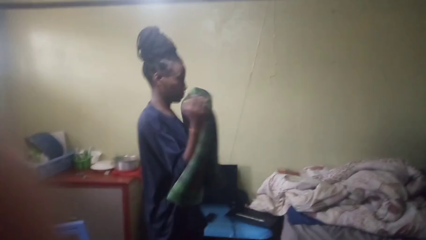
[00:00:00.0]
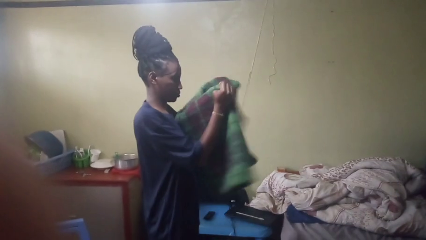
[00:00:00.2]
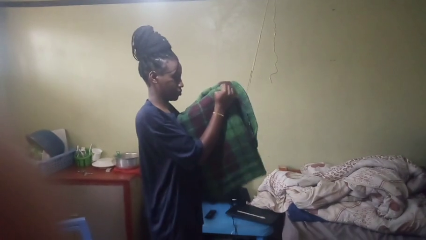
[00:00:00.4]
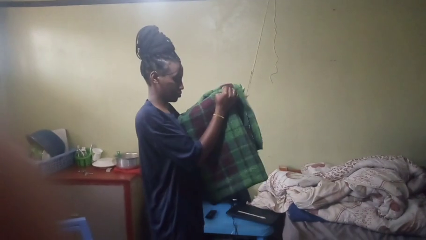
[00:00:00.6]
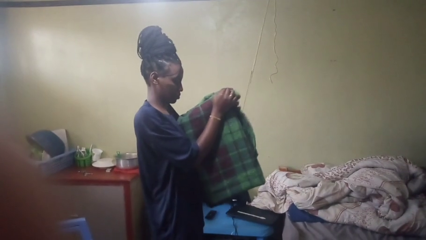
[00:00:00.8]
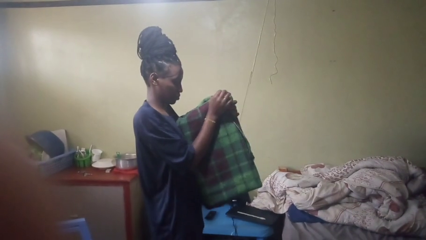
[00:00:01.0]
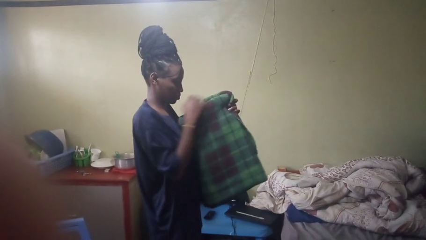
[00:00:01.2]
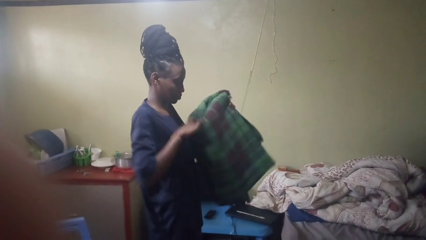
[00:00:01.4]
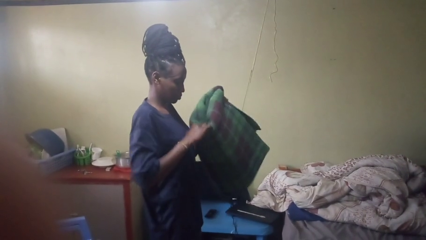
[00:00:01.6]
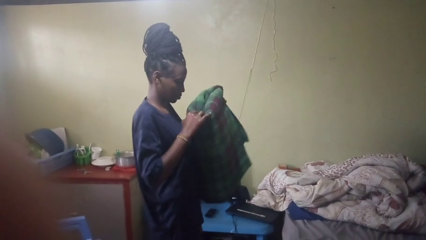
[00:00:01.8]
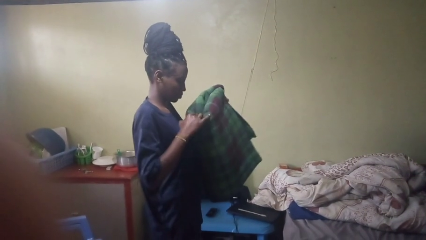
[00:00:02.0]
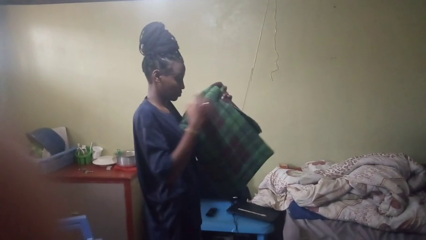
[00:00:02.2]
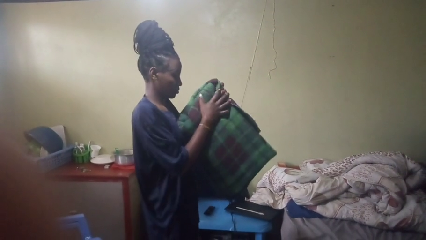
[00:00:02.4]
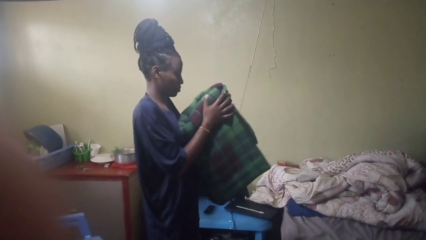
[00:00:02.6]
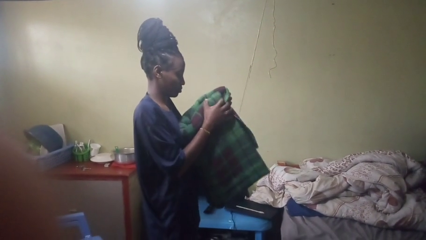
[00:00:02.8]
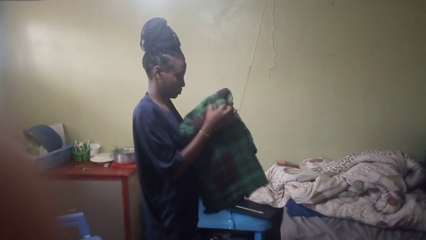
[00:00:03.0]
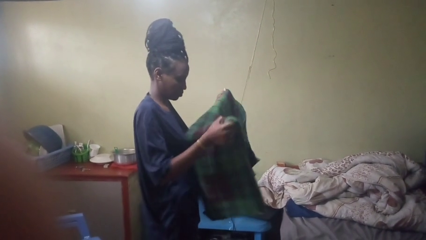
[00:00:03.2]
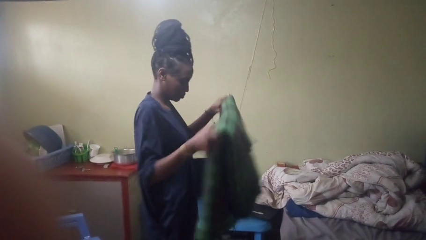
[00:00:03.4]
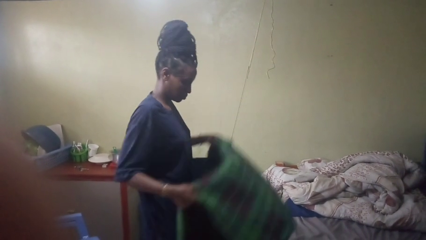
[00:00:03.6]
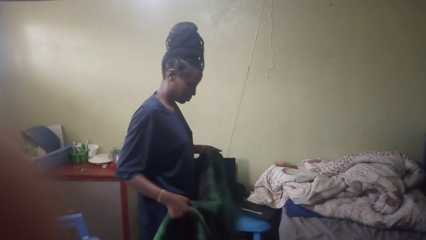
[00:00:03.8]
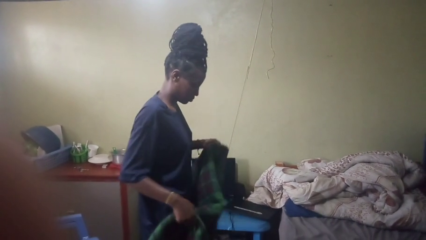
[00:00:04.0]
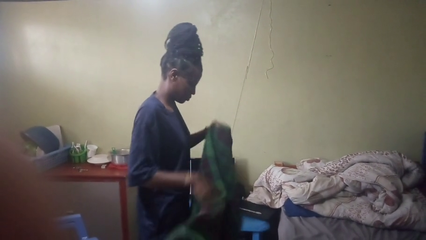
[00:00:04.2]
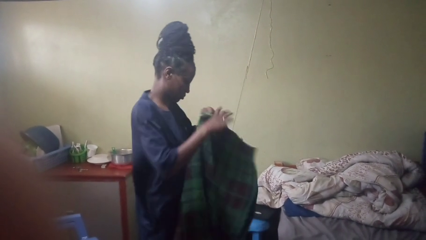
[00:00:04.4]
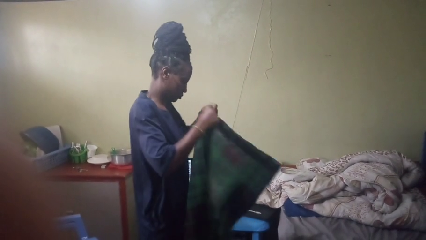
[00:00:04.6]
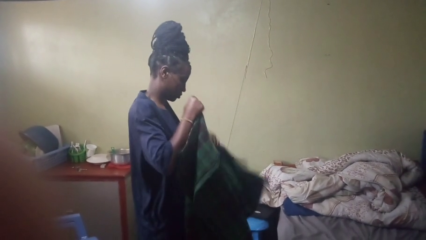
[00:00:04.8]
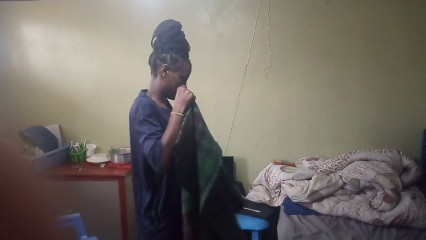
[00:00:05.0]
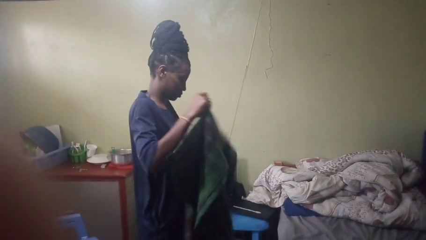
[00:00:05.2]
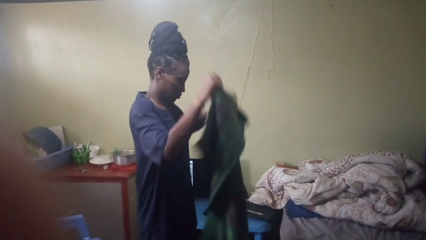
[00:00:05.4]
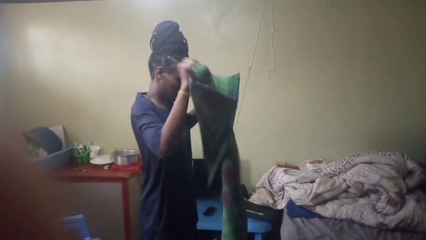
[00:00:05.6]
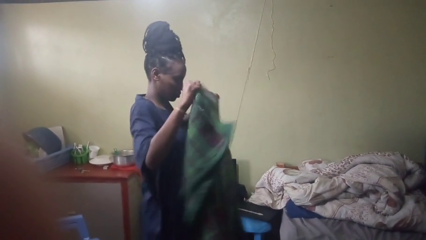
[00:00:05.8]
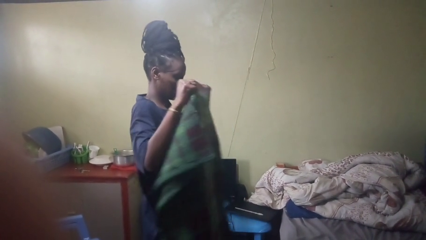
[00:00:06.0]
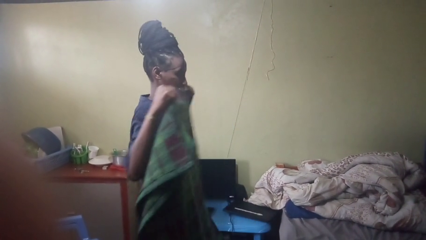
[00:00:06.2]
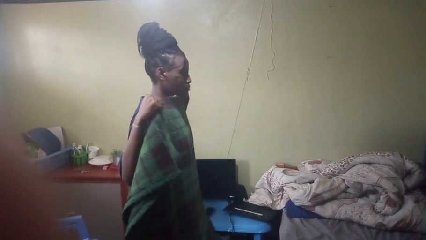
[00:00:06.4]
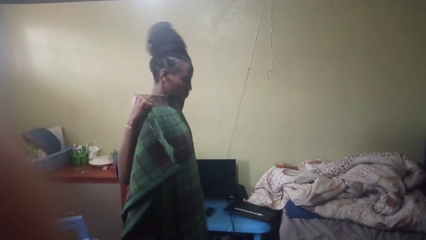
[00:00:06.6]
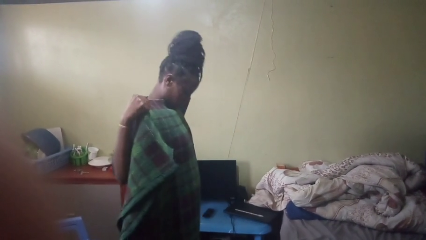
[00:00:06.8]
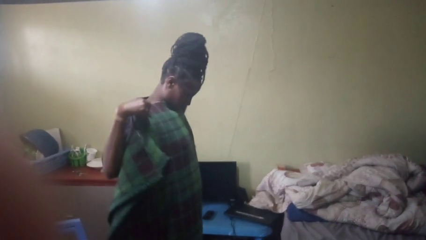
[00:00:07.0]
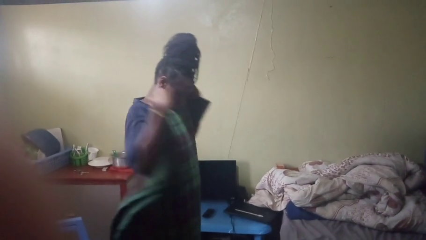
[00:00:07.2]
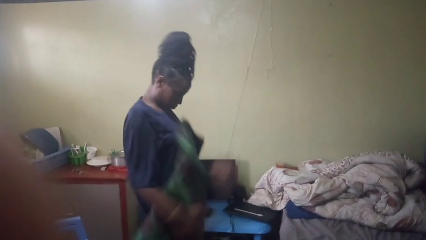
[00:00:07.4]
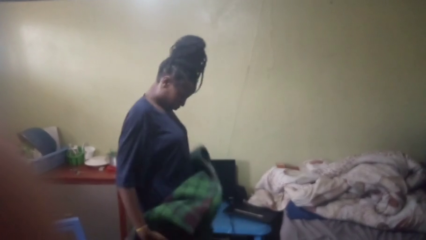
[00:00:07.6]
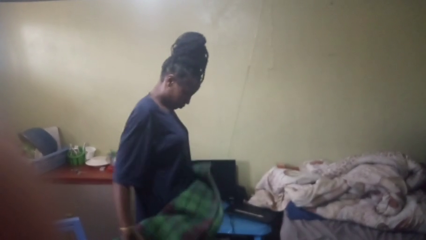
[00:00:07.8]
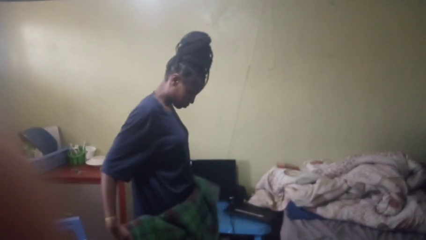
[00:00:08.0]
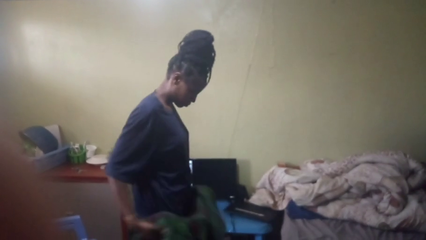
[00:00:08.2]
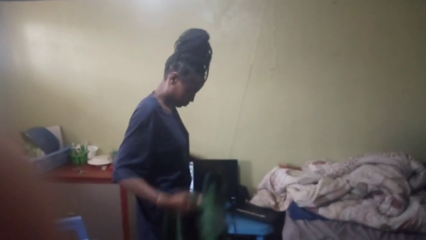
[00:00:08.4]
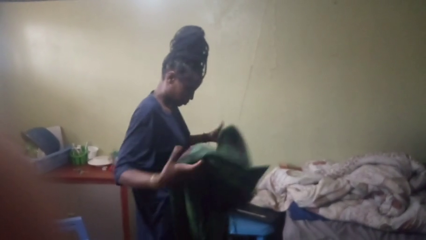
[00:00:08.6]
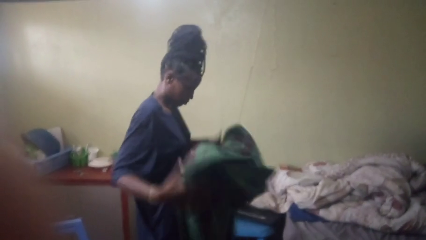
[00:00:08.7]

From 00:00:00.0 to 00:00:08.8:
person unfolds blanket

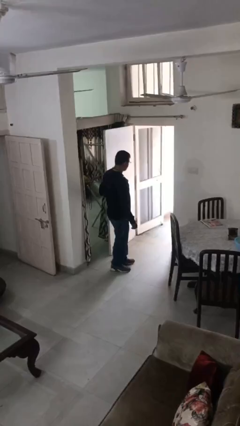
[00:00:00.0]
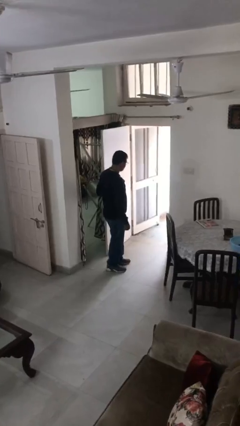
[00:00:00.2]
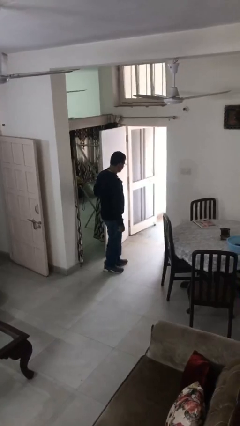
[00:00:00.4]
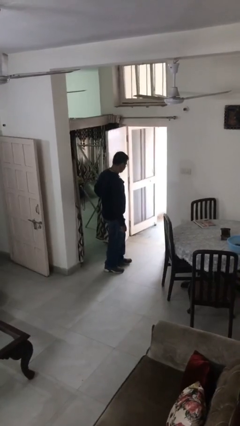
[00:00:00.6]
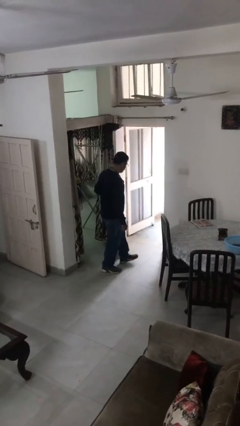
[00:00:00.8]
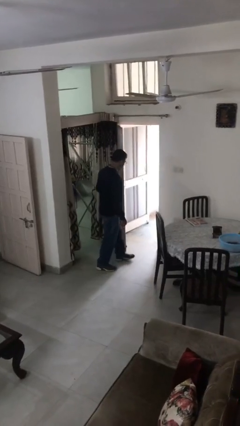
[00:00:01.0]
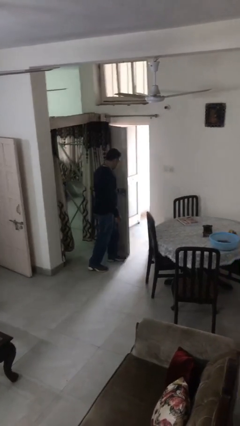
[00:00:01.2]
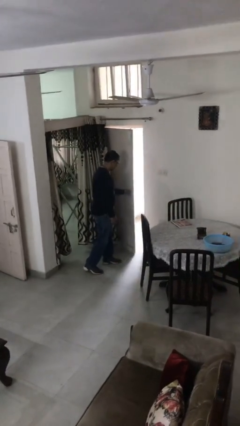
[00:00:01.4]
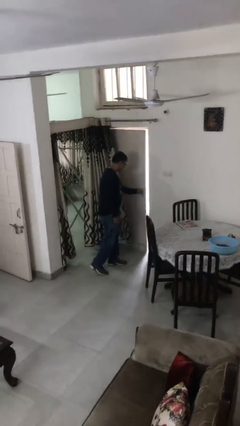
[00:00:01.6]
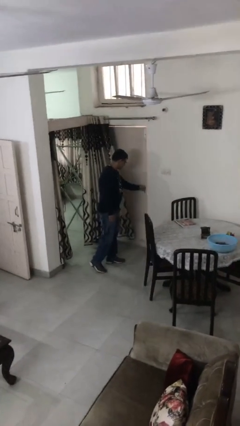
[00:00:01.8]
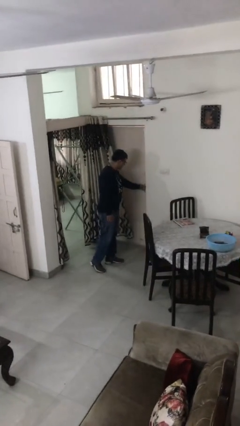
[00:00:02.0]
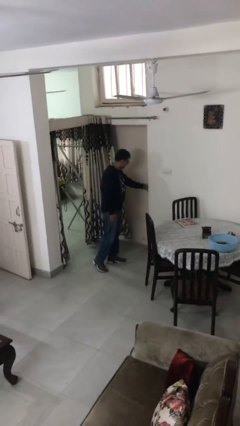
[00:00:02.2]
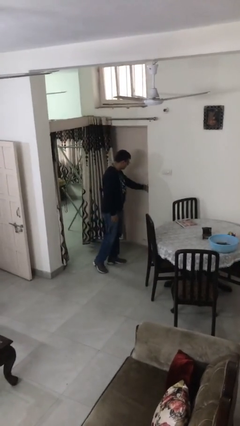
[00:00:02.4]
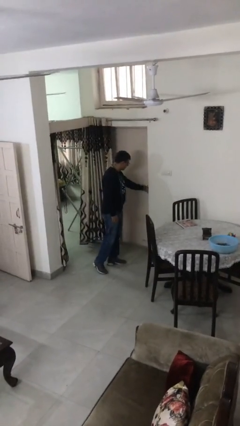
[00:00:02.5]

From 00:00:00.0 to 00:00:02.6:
person closes facility door

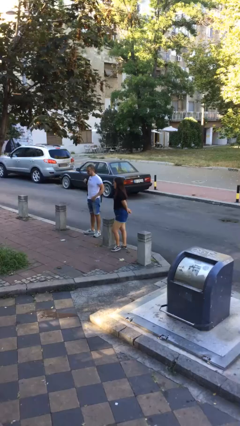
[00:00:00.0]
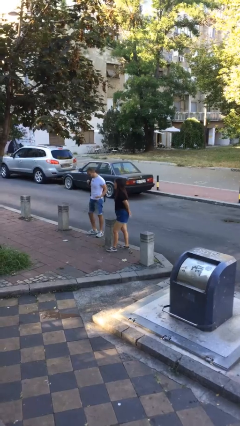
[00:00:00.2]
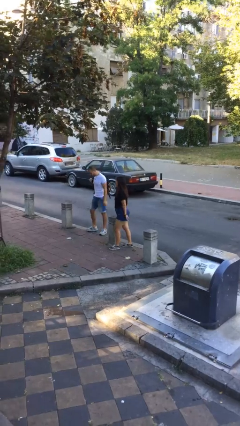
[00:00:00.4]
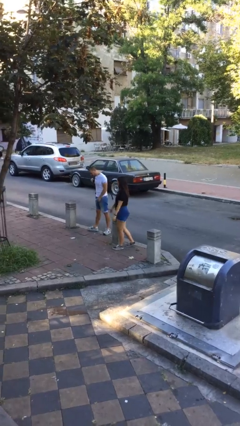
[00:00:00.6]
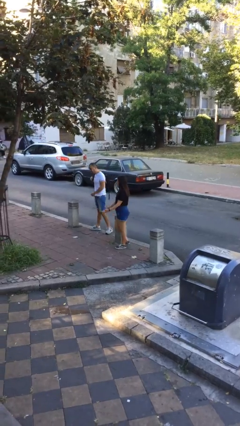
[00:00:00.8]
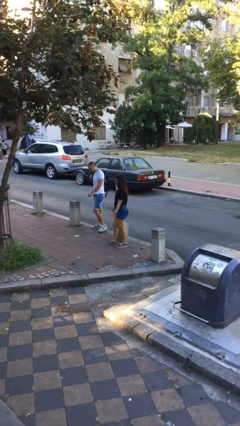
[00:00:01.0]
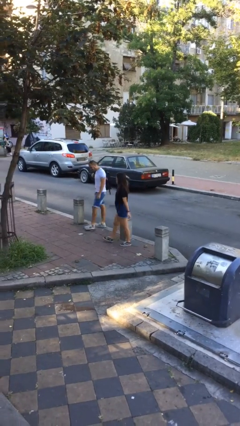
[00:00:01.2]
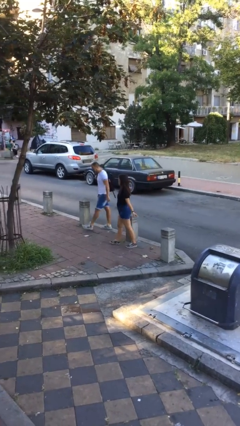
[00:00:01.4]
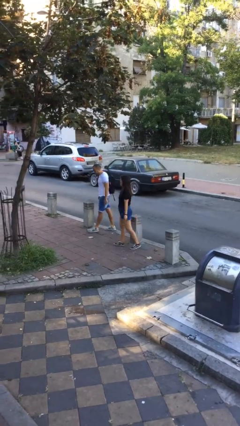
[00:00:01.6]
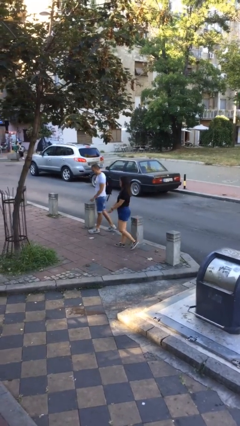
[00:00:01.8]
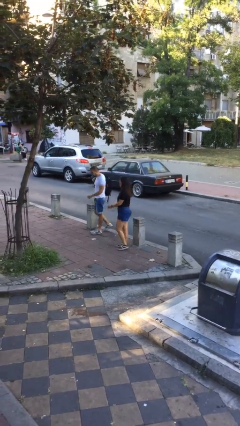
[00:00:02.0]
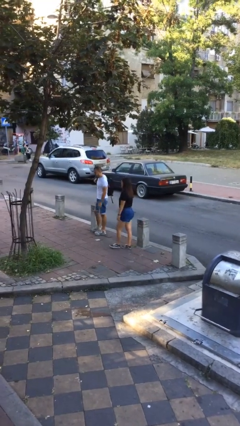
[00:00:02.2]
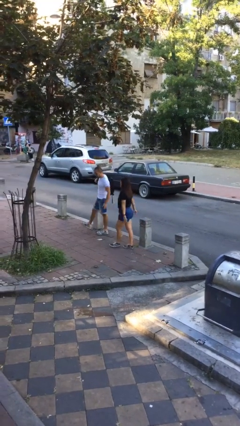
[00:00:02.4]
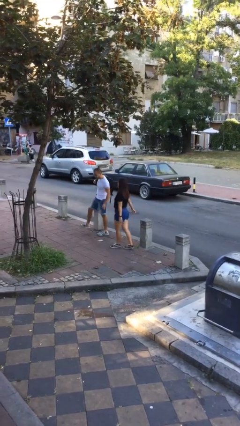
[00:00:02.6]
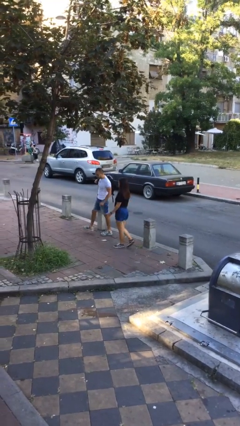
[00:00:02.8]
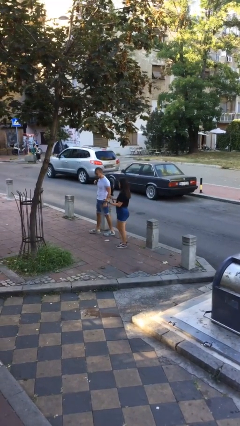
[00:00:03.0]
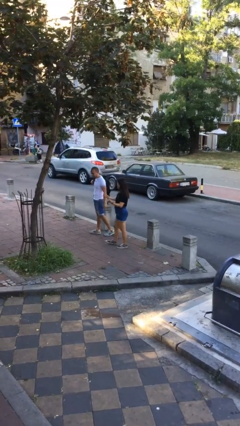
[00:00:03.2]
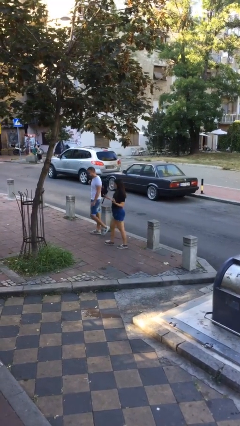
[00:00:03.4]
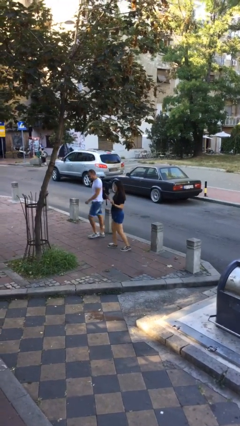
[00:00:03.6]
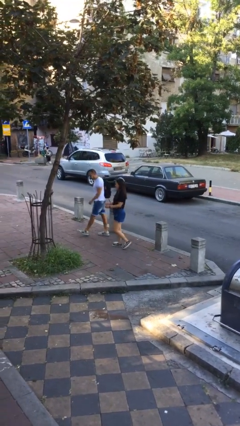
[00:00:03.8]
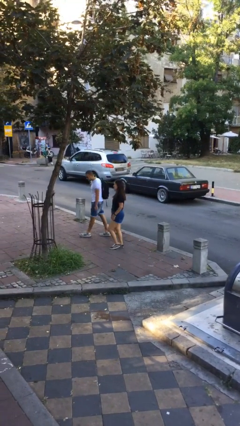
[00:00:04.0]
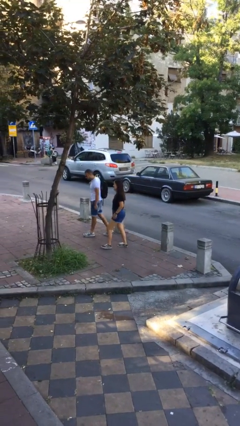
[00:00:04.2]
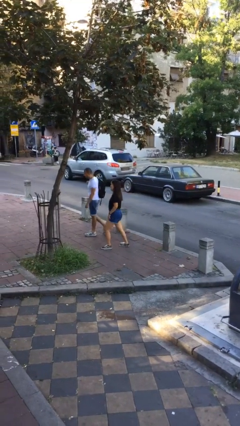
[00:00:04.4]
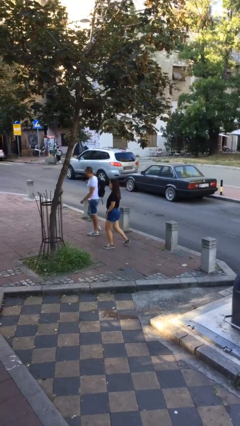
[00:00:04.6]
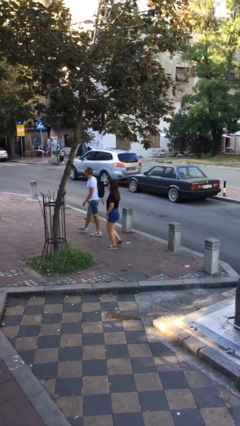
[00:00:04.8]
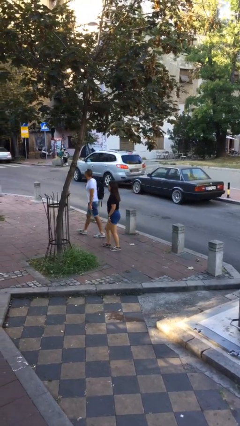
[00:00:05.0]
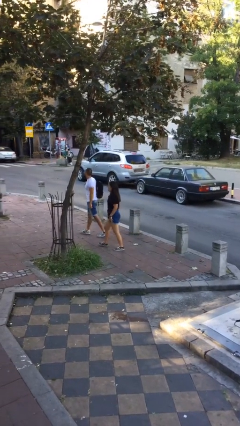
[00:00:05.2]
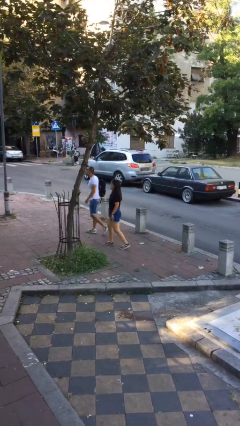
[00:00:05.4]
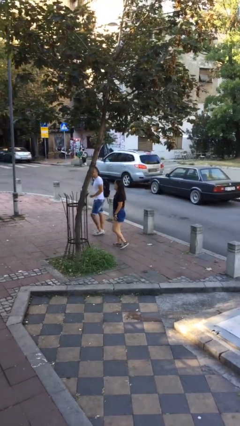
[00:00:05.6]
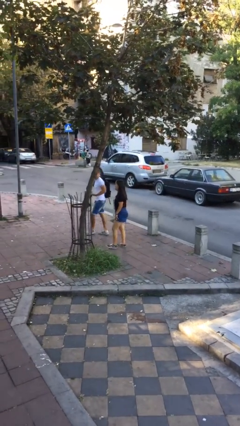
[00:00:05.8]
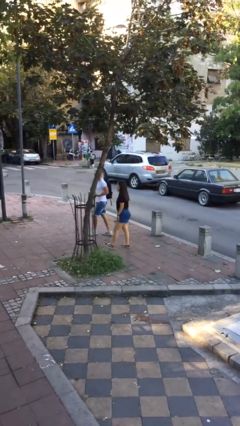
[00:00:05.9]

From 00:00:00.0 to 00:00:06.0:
person talks to person

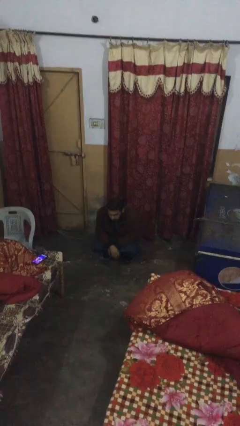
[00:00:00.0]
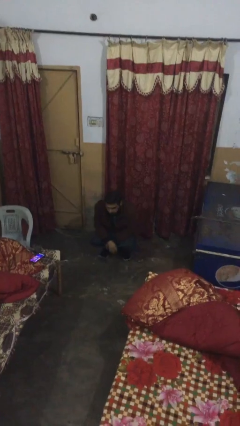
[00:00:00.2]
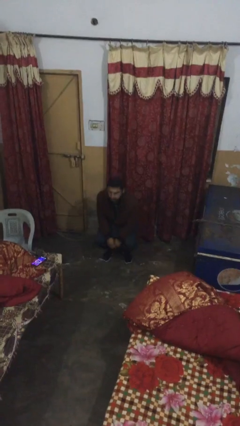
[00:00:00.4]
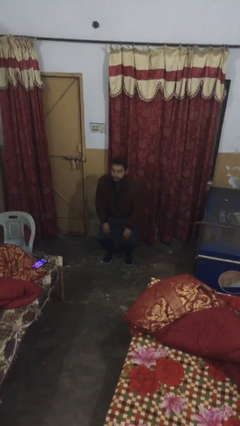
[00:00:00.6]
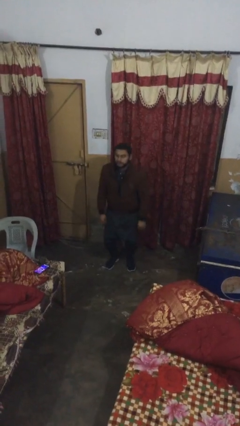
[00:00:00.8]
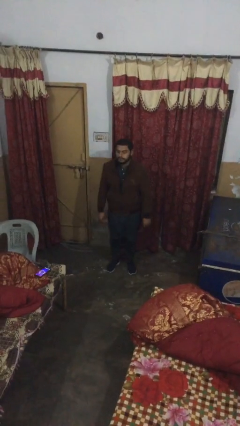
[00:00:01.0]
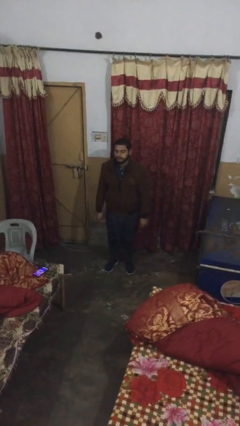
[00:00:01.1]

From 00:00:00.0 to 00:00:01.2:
person stands up
